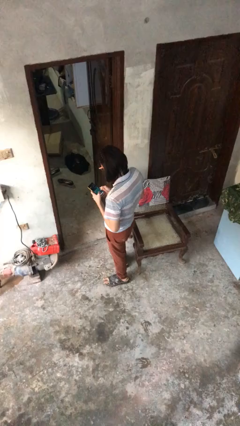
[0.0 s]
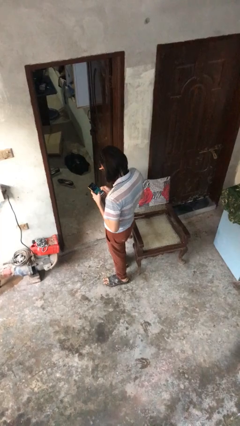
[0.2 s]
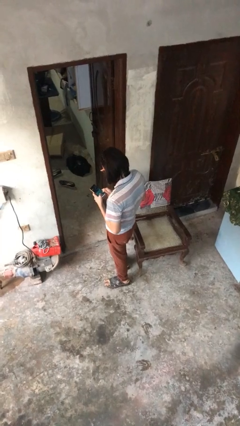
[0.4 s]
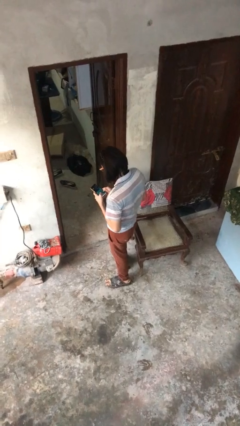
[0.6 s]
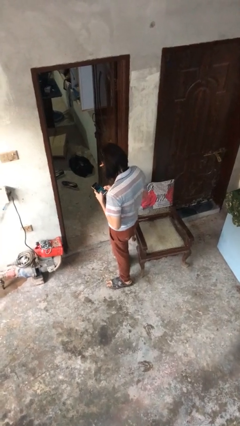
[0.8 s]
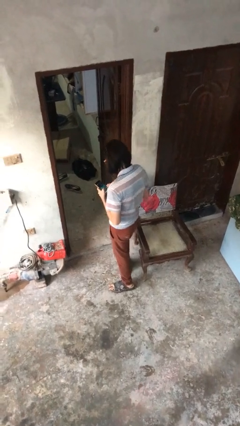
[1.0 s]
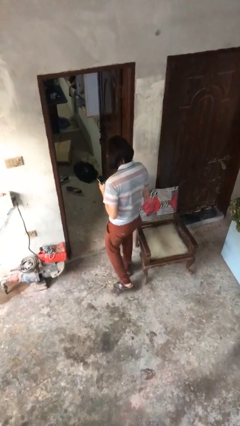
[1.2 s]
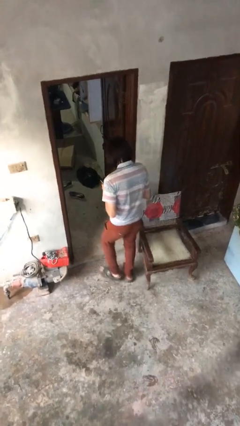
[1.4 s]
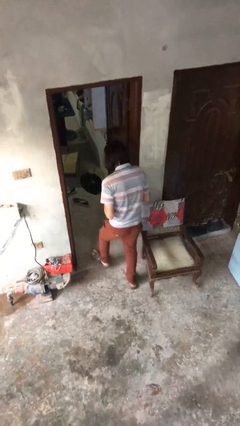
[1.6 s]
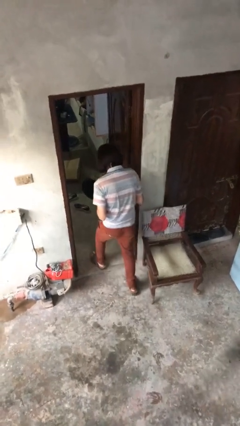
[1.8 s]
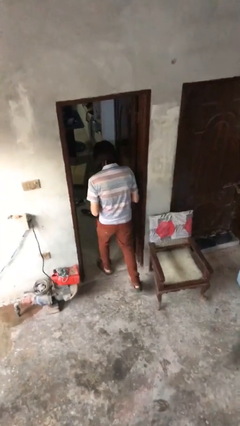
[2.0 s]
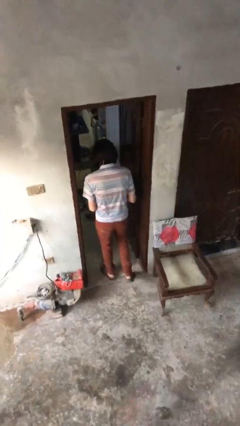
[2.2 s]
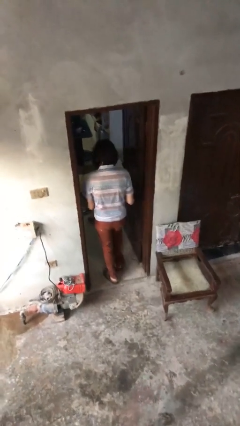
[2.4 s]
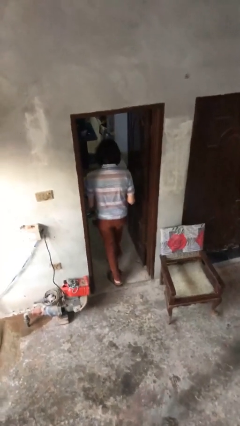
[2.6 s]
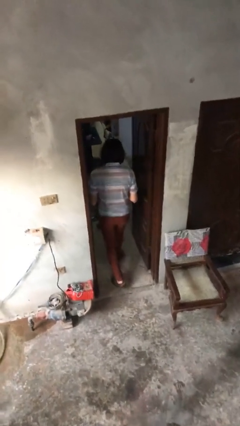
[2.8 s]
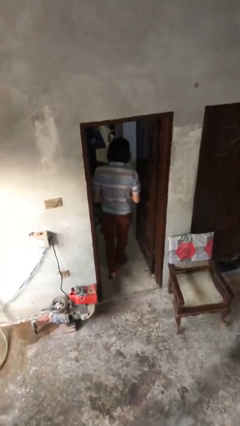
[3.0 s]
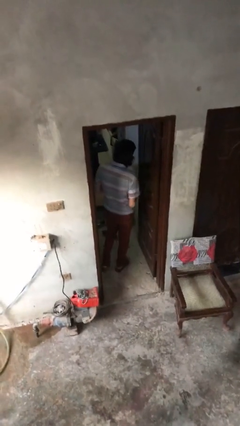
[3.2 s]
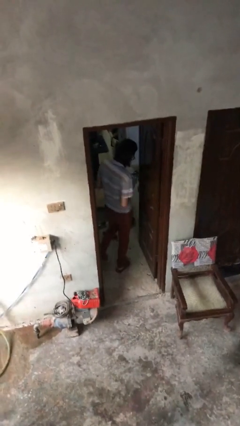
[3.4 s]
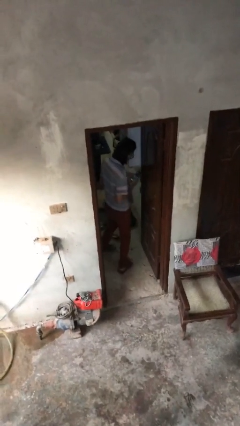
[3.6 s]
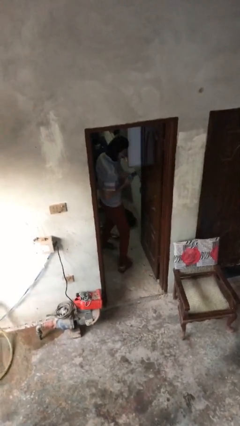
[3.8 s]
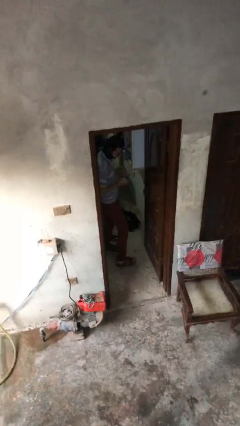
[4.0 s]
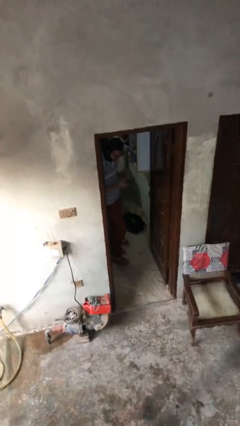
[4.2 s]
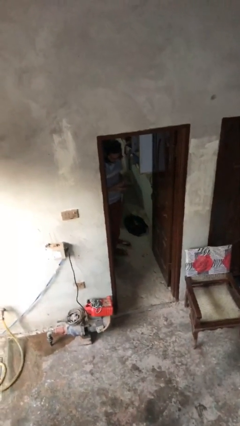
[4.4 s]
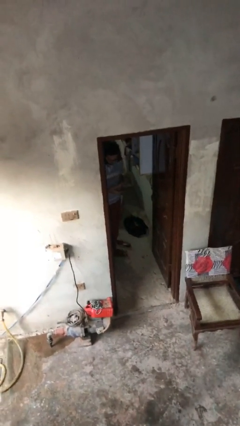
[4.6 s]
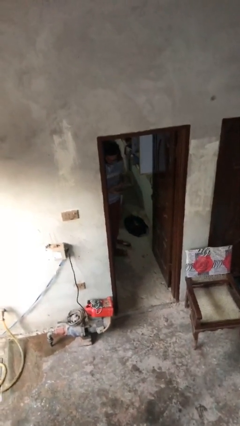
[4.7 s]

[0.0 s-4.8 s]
person enters scene through structure

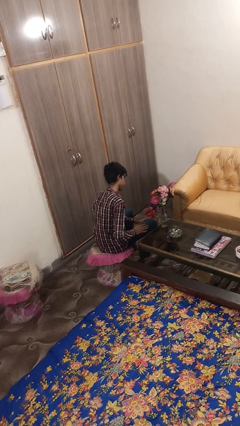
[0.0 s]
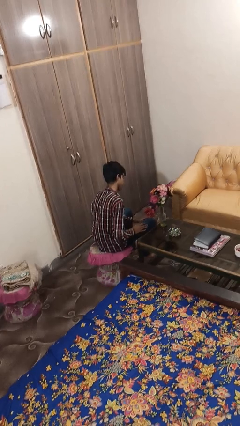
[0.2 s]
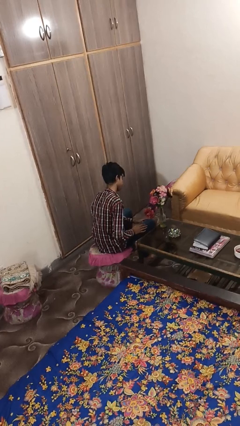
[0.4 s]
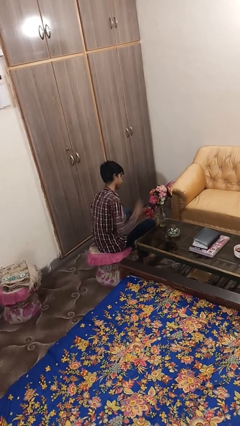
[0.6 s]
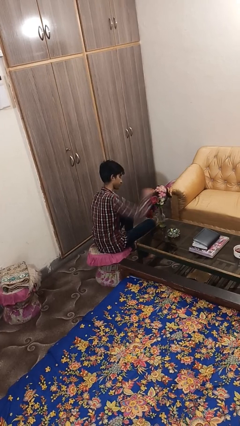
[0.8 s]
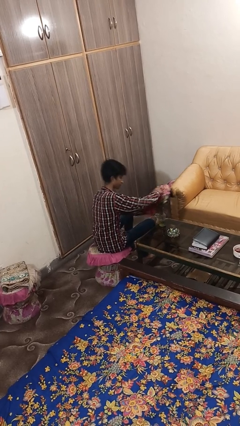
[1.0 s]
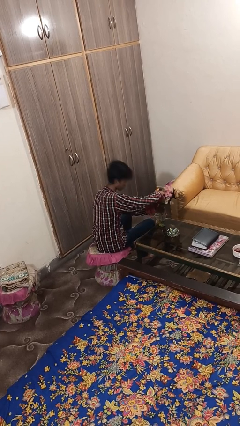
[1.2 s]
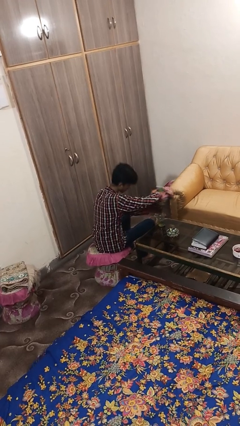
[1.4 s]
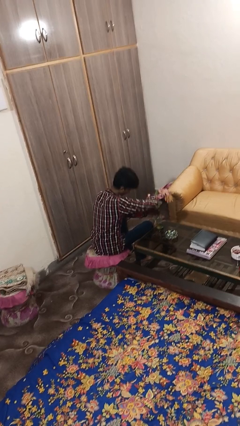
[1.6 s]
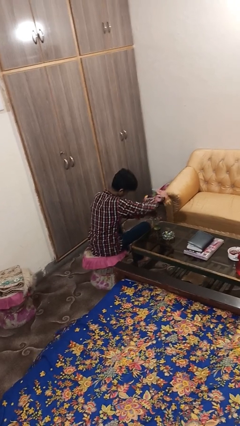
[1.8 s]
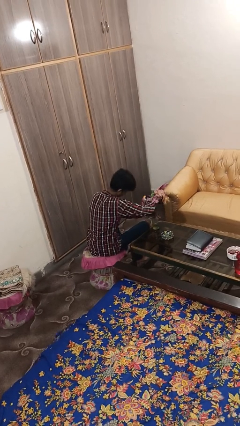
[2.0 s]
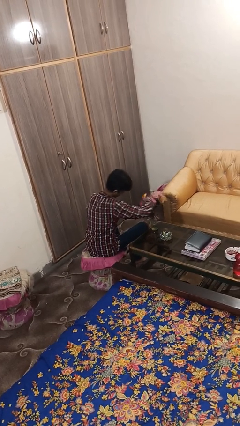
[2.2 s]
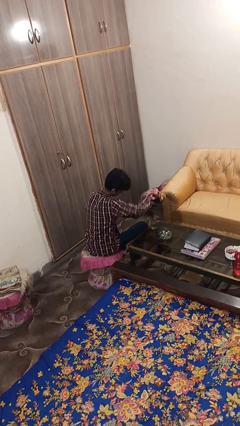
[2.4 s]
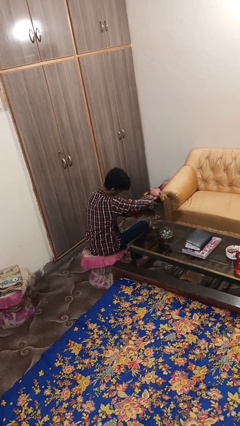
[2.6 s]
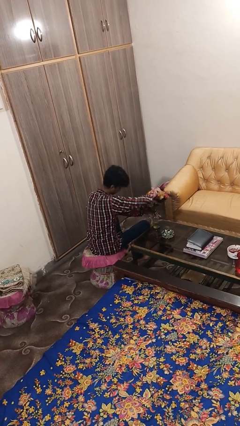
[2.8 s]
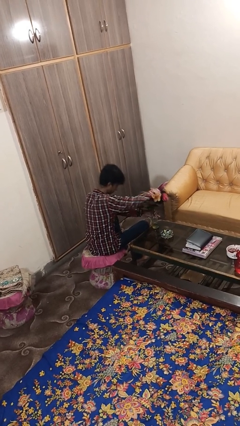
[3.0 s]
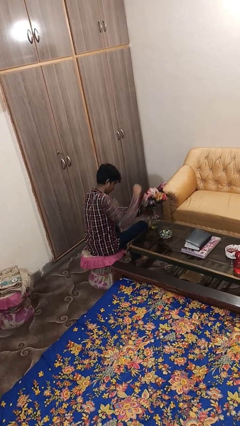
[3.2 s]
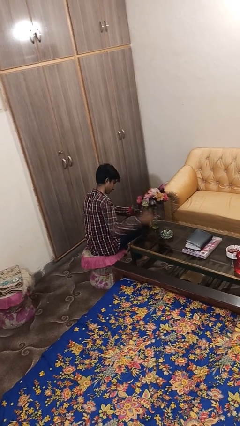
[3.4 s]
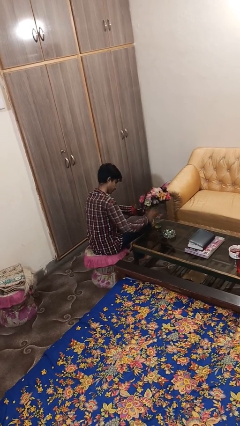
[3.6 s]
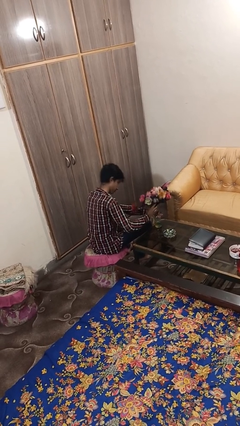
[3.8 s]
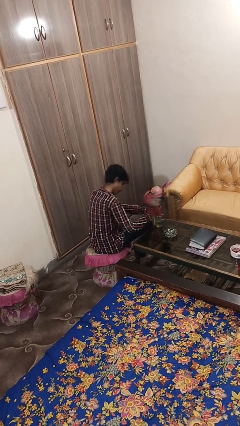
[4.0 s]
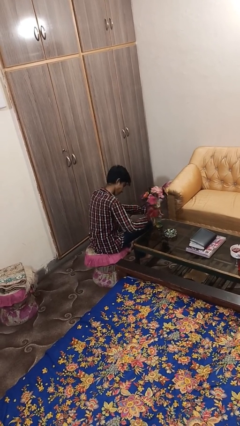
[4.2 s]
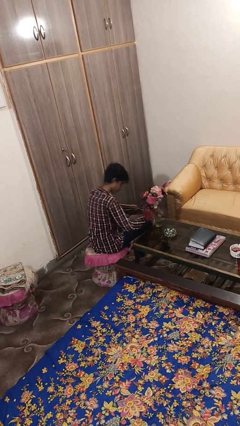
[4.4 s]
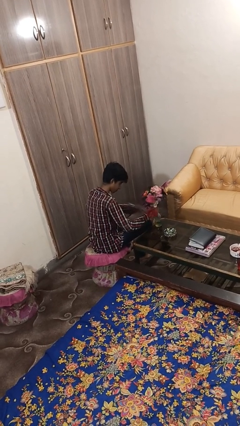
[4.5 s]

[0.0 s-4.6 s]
person arranges flowers in vase

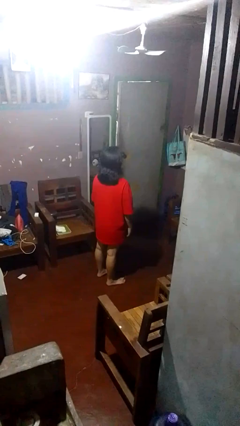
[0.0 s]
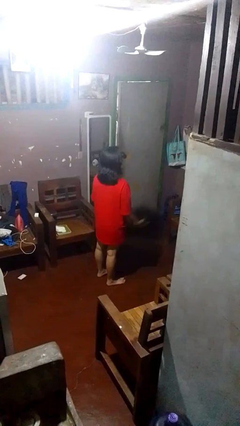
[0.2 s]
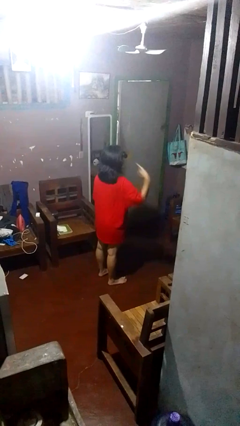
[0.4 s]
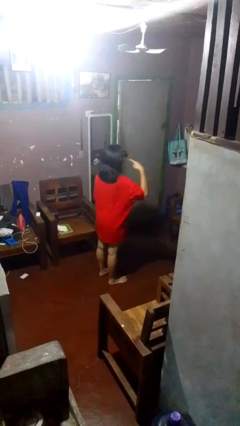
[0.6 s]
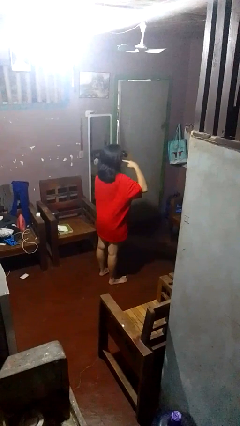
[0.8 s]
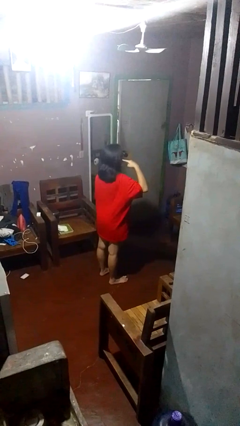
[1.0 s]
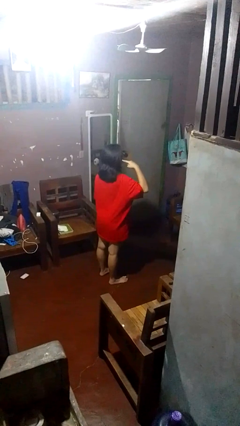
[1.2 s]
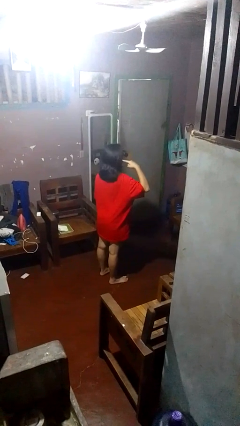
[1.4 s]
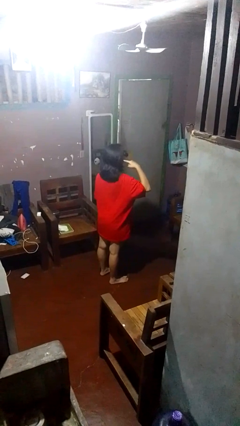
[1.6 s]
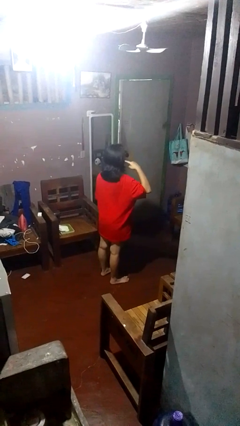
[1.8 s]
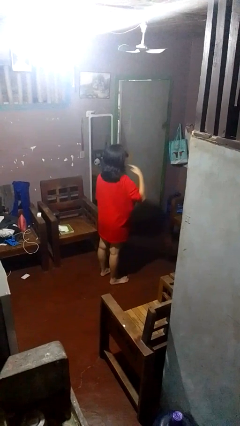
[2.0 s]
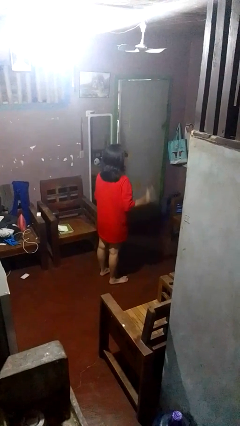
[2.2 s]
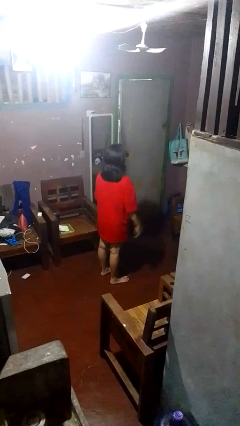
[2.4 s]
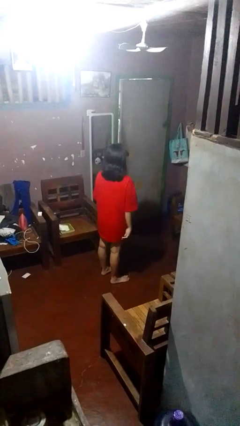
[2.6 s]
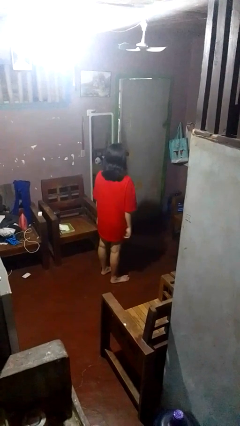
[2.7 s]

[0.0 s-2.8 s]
person gestures listen closely

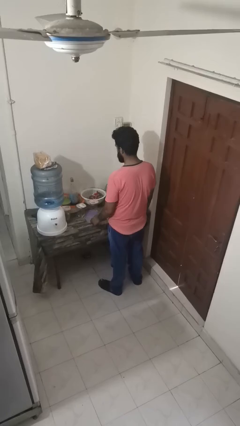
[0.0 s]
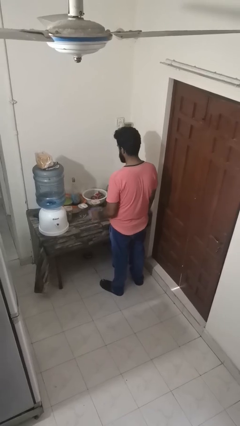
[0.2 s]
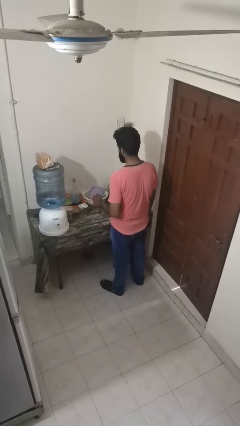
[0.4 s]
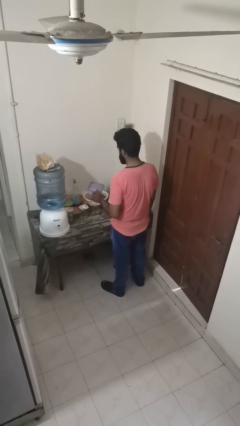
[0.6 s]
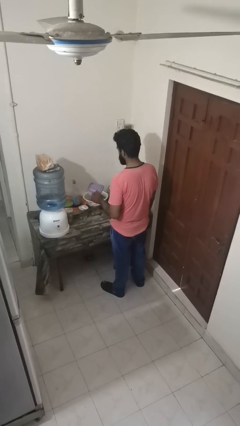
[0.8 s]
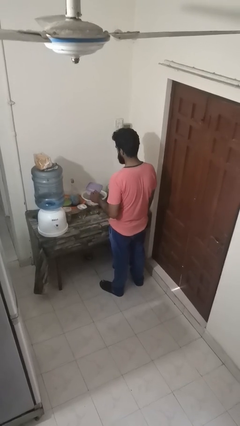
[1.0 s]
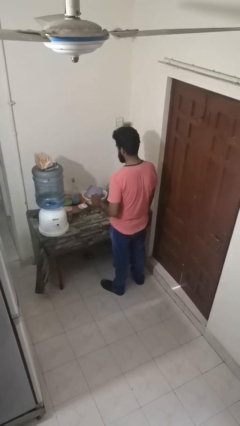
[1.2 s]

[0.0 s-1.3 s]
person picks up object from countertop

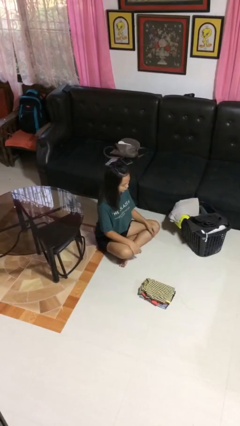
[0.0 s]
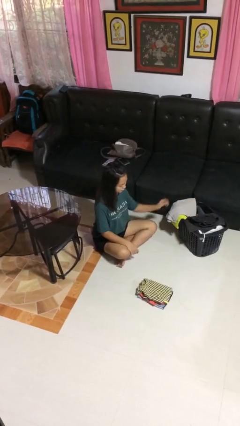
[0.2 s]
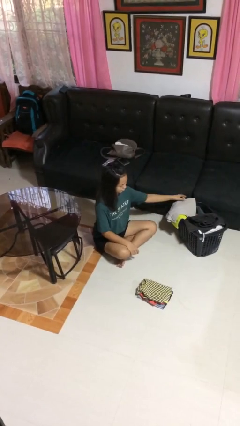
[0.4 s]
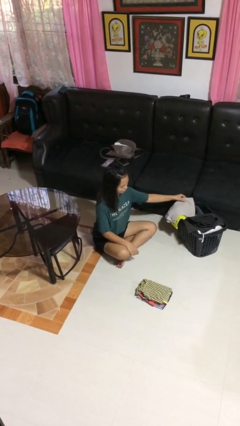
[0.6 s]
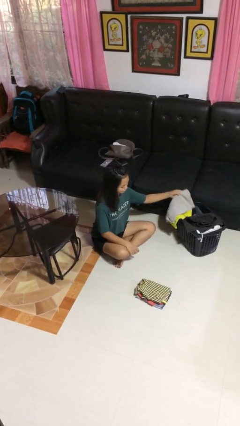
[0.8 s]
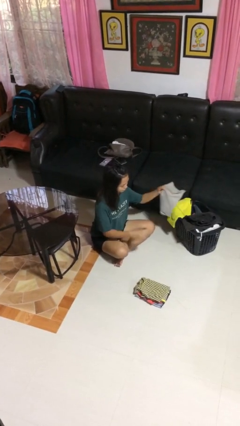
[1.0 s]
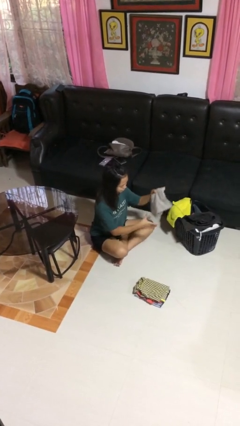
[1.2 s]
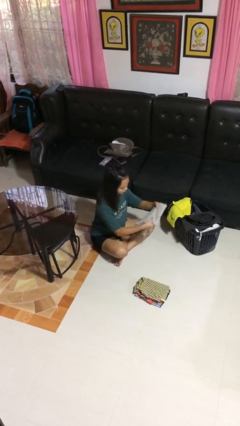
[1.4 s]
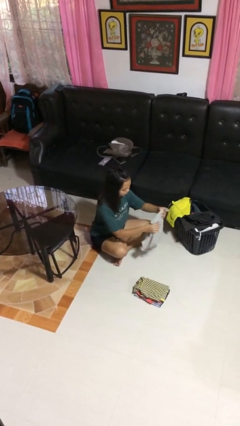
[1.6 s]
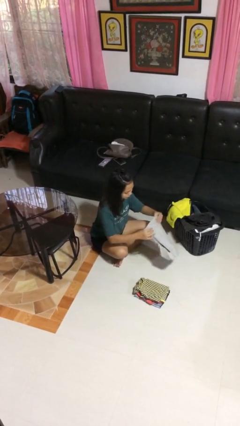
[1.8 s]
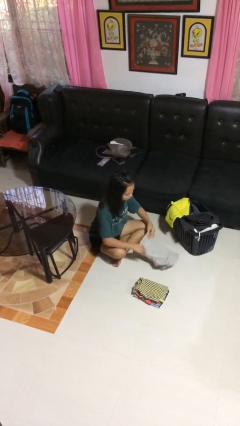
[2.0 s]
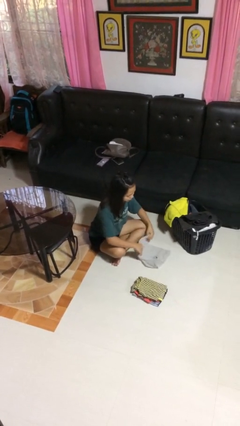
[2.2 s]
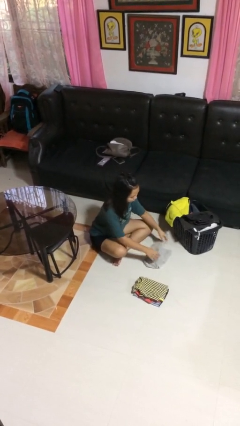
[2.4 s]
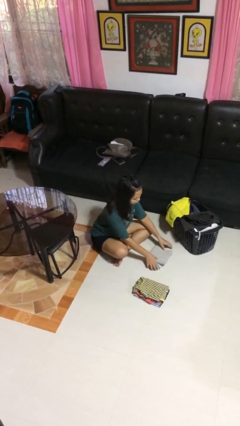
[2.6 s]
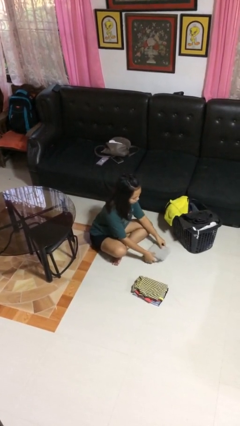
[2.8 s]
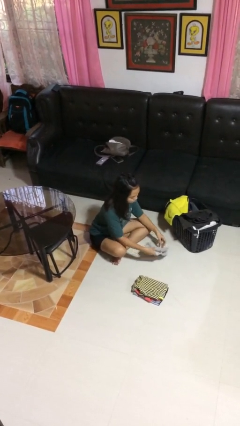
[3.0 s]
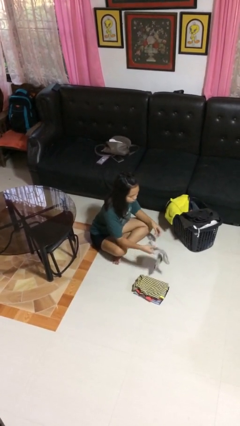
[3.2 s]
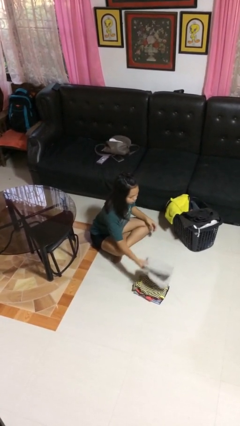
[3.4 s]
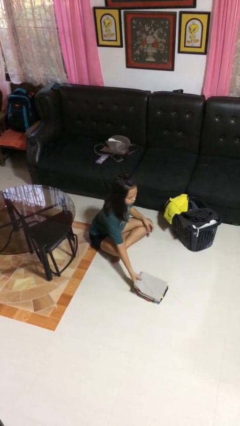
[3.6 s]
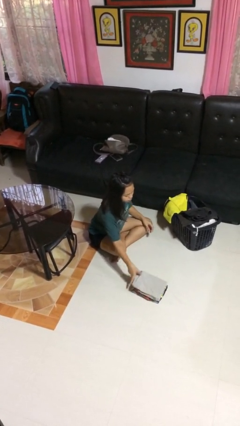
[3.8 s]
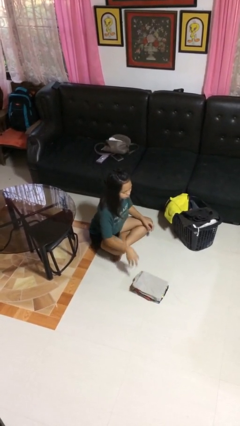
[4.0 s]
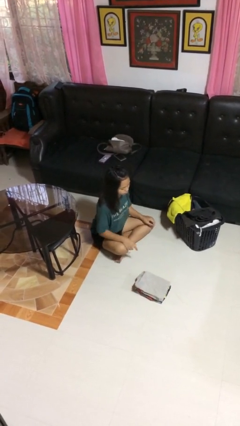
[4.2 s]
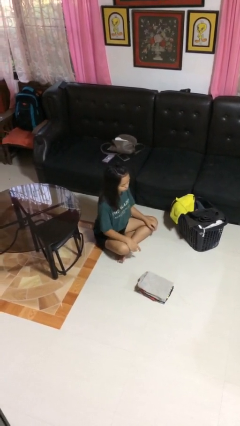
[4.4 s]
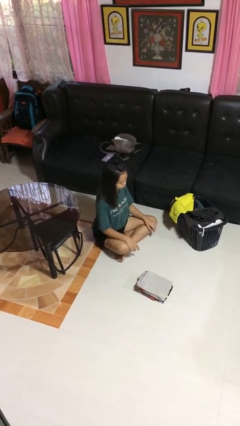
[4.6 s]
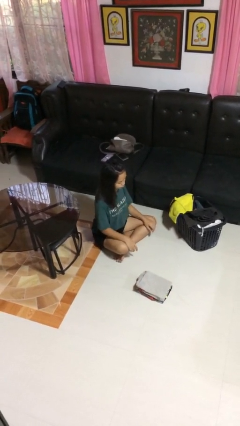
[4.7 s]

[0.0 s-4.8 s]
person folds shirt
